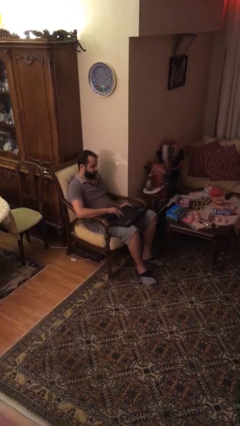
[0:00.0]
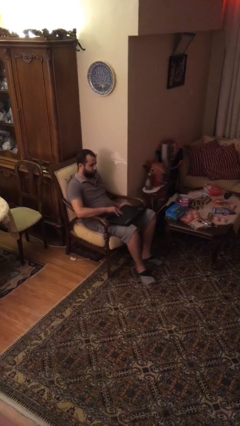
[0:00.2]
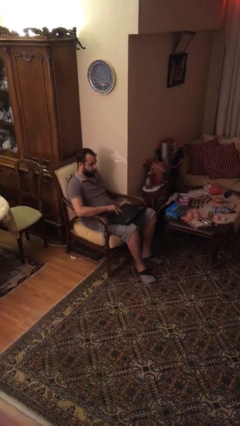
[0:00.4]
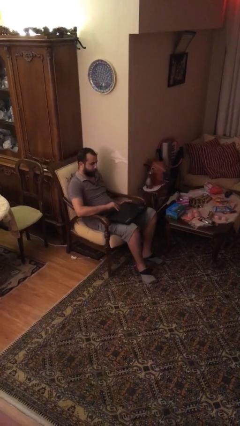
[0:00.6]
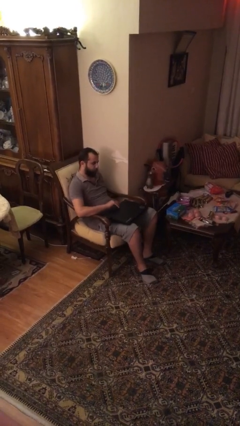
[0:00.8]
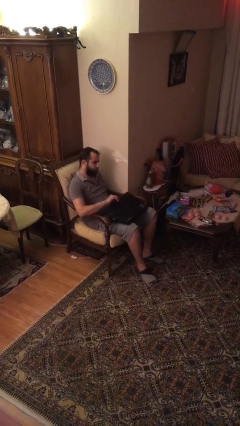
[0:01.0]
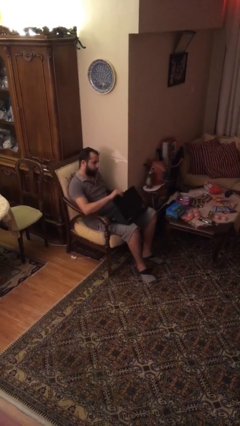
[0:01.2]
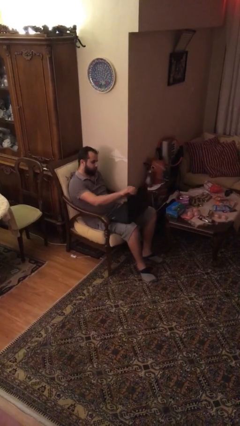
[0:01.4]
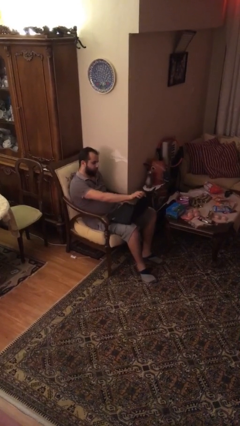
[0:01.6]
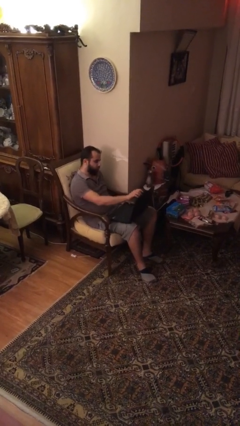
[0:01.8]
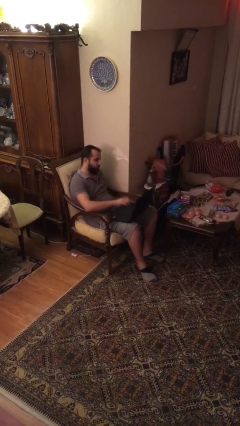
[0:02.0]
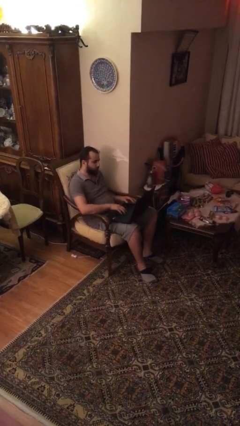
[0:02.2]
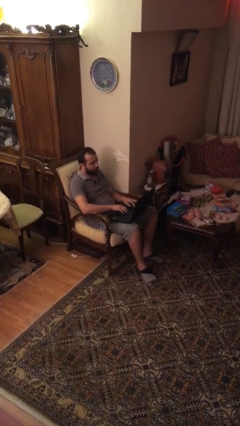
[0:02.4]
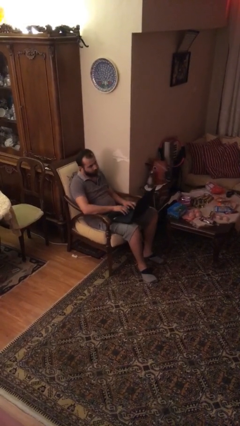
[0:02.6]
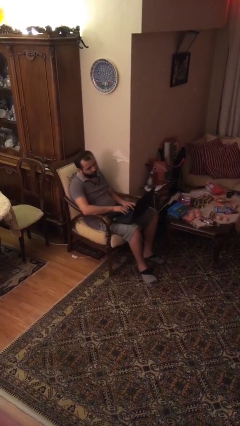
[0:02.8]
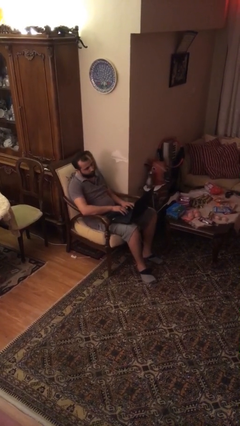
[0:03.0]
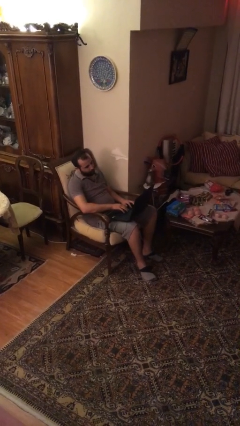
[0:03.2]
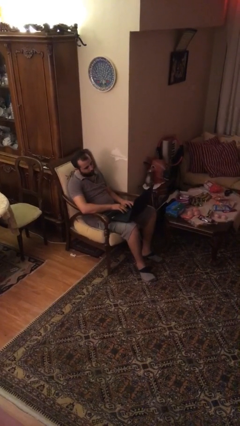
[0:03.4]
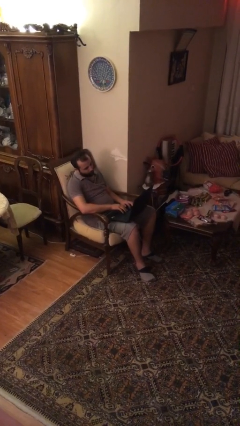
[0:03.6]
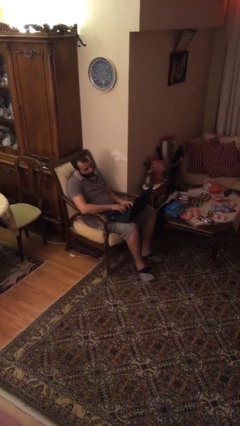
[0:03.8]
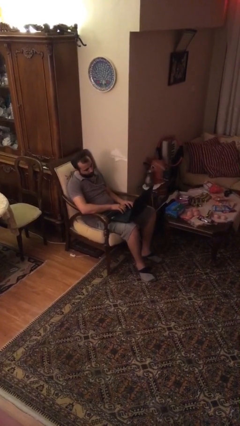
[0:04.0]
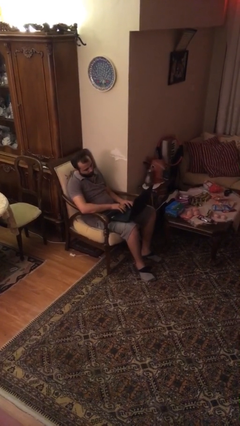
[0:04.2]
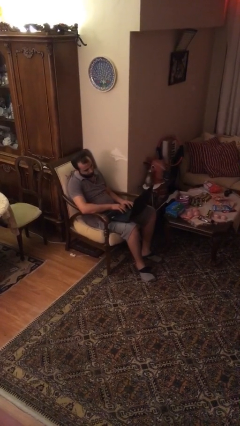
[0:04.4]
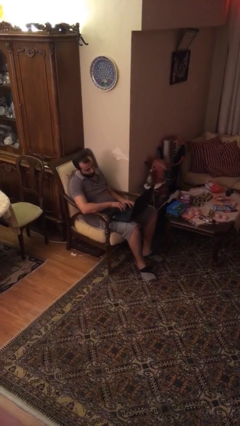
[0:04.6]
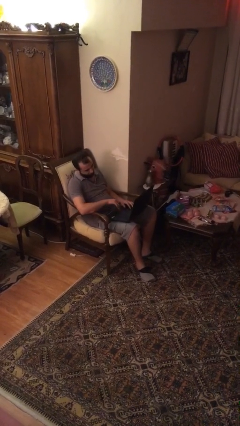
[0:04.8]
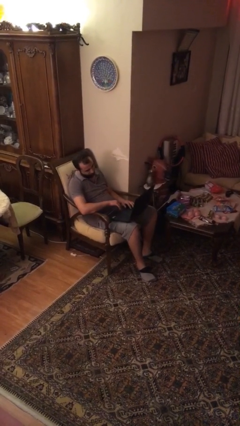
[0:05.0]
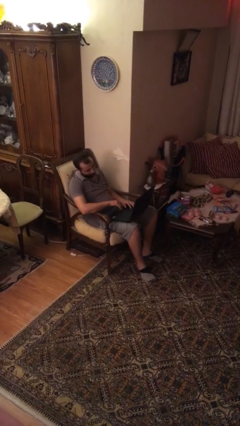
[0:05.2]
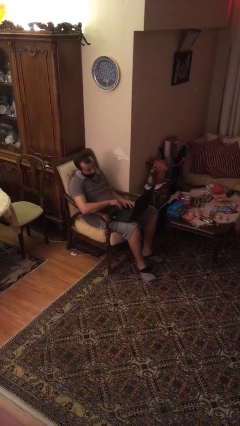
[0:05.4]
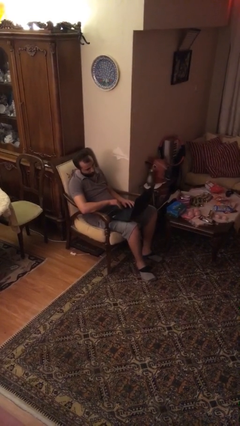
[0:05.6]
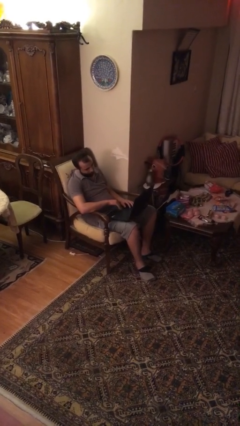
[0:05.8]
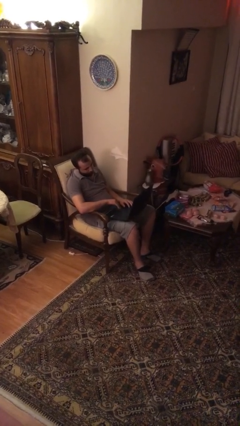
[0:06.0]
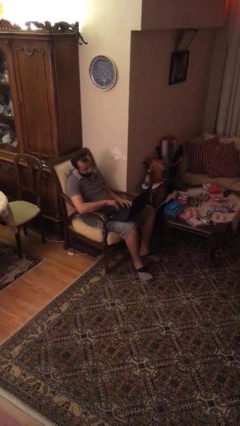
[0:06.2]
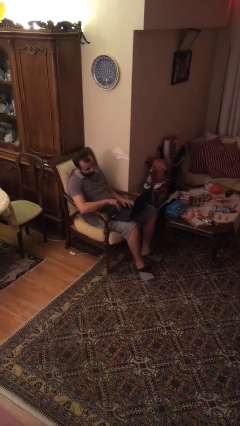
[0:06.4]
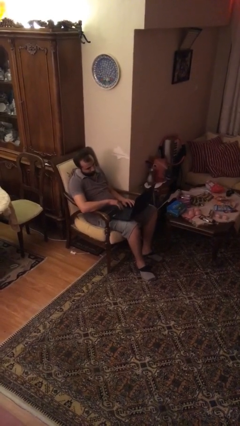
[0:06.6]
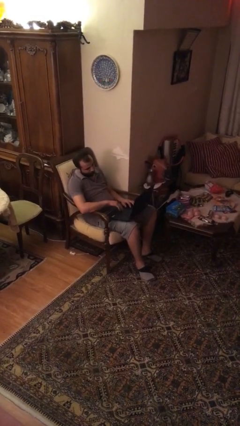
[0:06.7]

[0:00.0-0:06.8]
person interacts with laptop

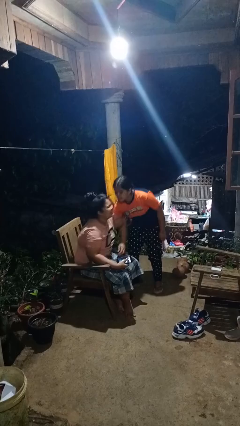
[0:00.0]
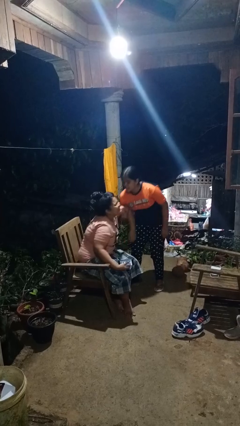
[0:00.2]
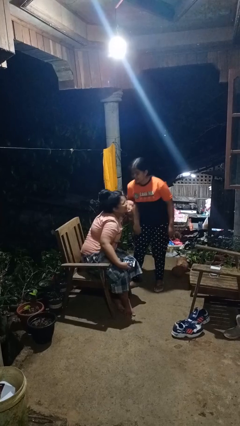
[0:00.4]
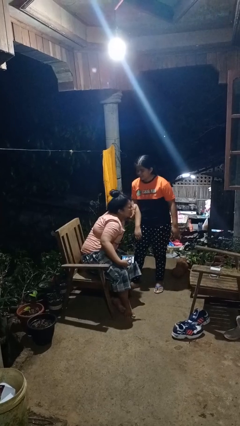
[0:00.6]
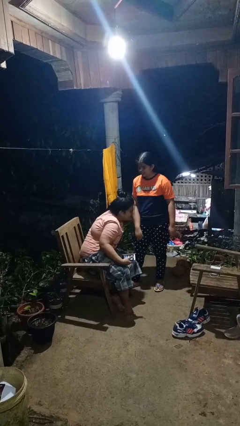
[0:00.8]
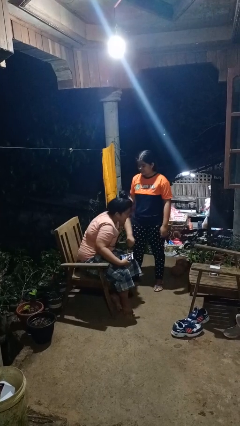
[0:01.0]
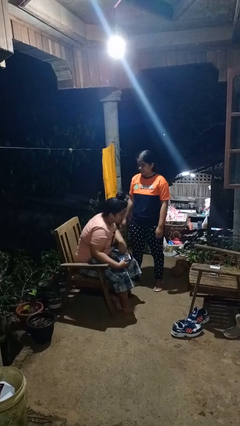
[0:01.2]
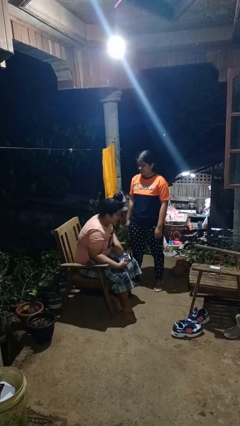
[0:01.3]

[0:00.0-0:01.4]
person grabs person by bicep

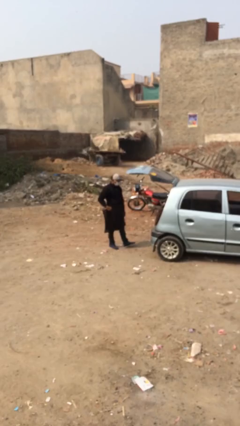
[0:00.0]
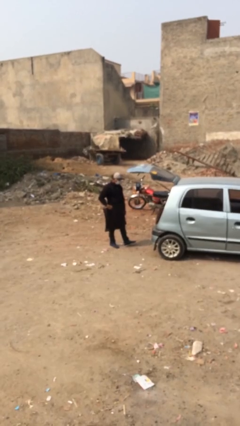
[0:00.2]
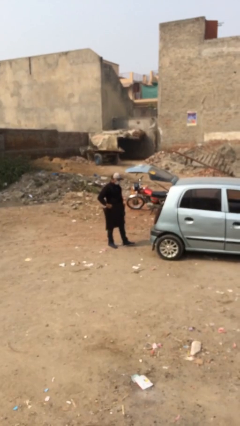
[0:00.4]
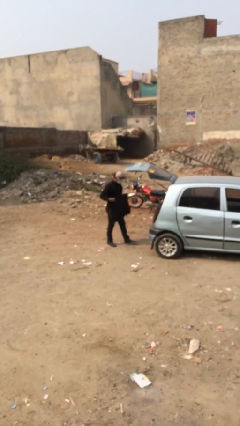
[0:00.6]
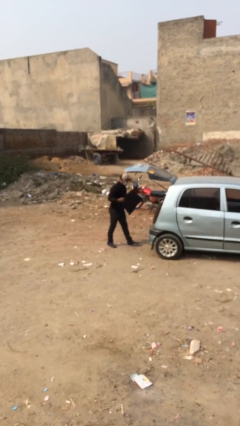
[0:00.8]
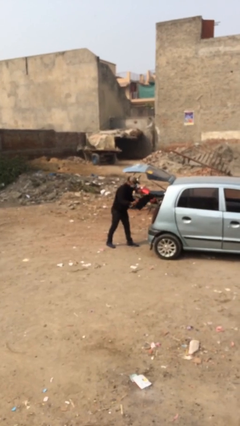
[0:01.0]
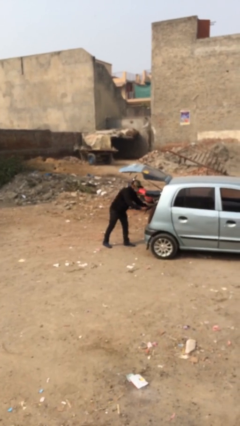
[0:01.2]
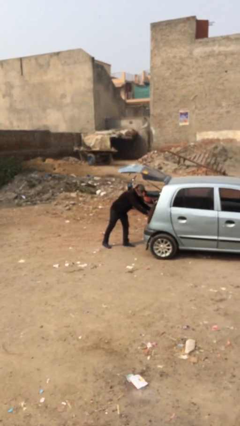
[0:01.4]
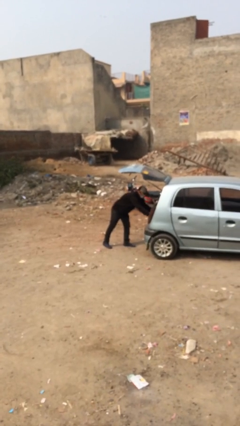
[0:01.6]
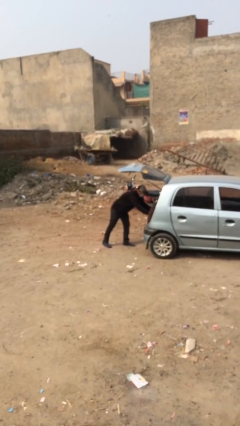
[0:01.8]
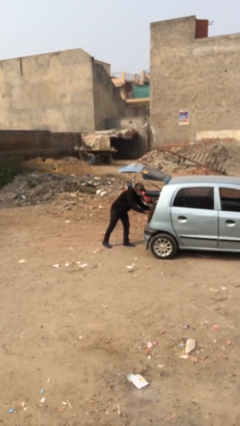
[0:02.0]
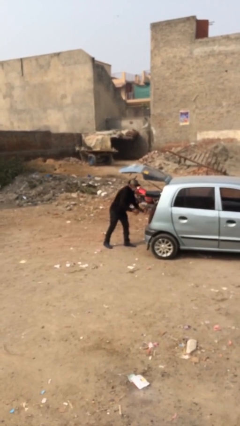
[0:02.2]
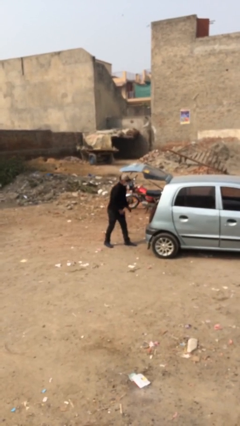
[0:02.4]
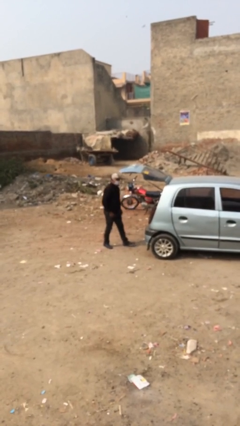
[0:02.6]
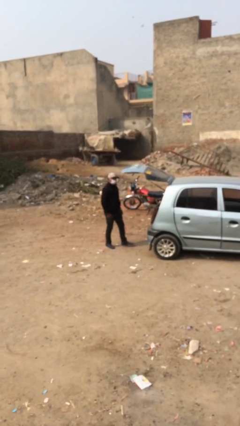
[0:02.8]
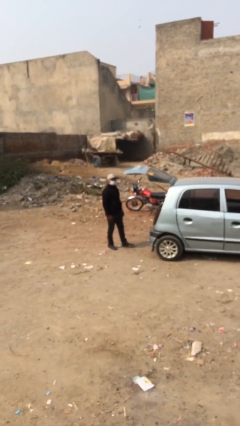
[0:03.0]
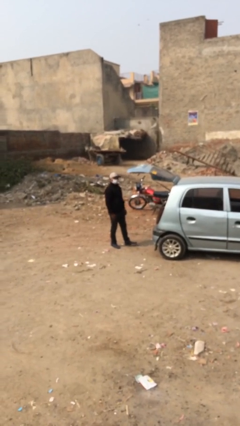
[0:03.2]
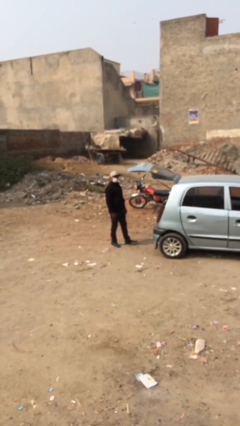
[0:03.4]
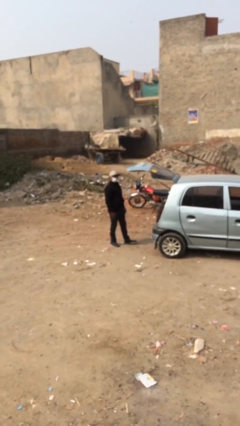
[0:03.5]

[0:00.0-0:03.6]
person loads car

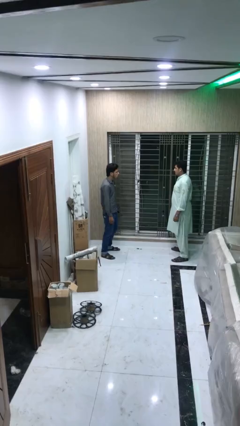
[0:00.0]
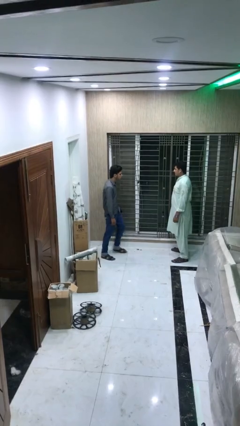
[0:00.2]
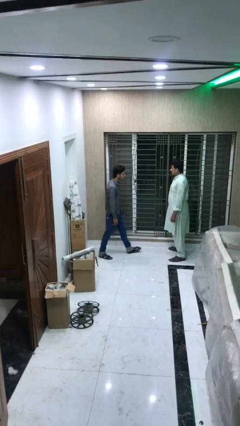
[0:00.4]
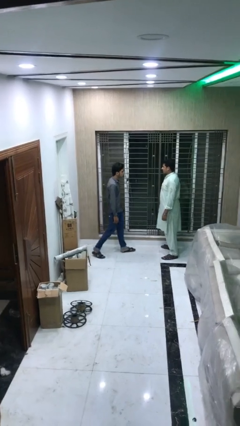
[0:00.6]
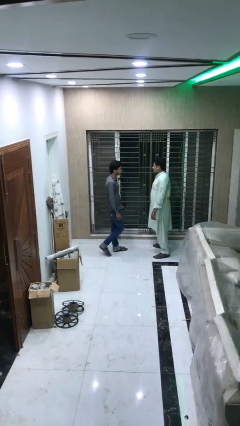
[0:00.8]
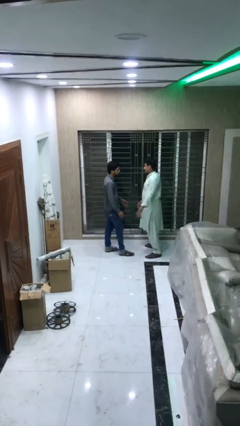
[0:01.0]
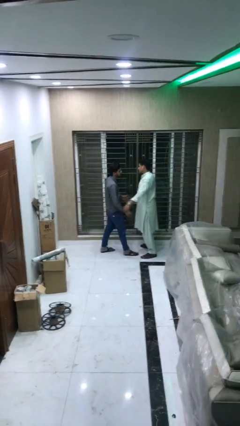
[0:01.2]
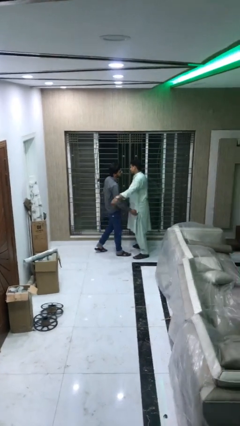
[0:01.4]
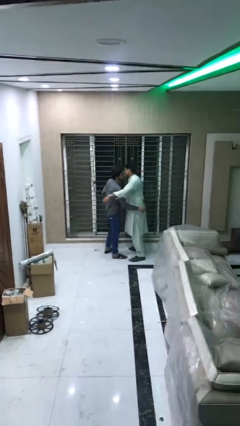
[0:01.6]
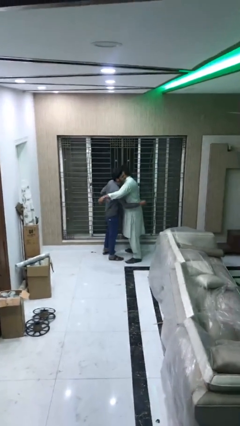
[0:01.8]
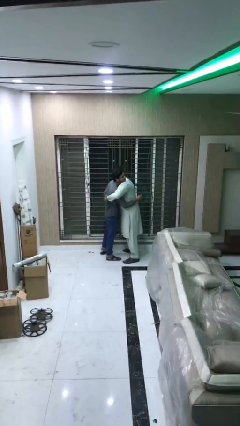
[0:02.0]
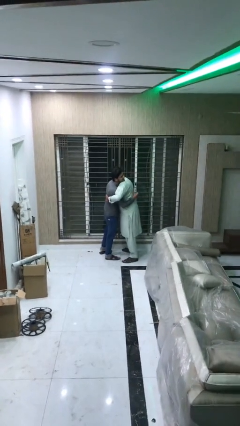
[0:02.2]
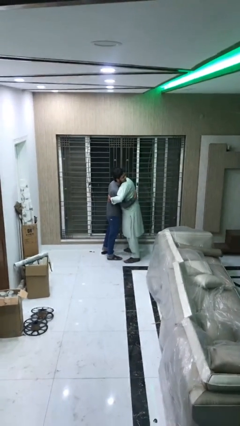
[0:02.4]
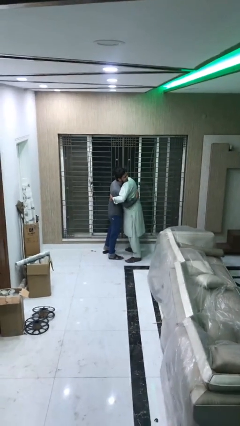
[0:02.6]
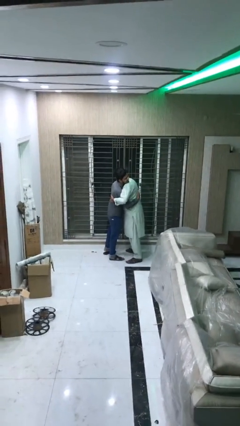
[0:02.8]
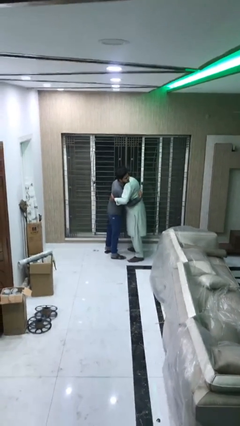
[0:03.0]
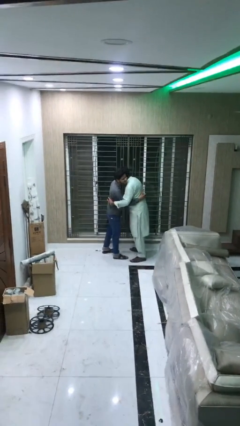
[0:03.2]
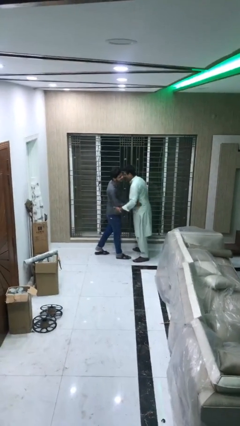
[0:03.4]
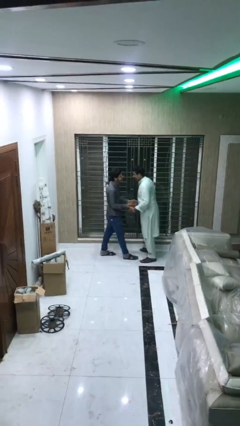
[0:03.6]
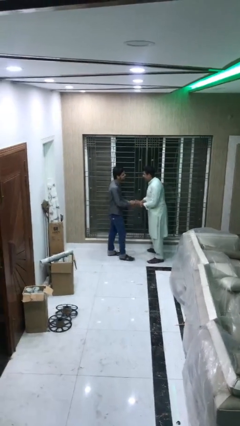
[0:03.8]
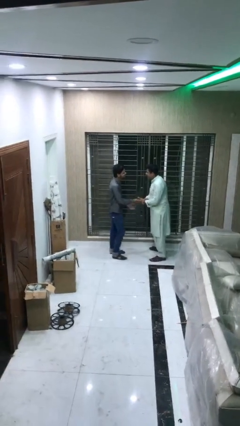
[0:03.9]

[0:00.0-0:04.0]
person embraces person

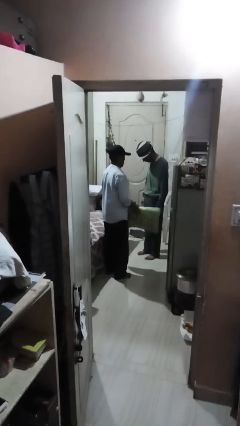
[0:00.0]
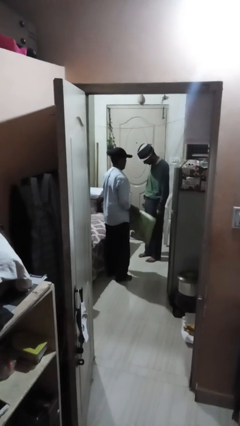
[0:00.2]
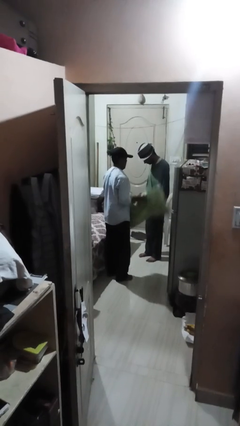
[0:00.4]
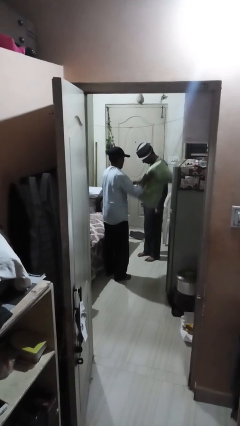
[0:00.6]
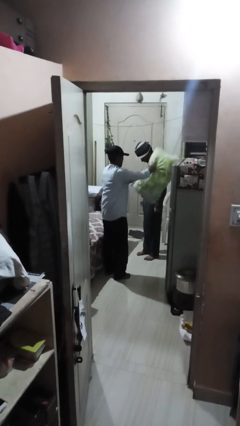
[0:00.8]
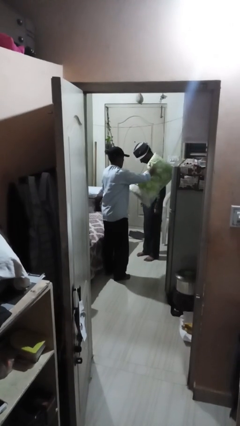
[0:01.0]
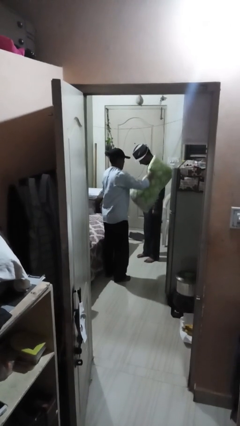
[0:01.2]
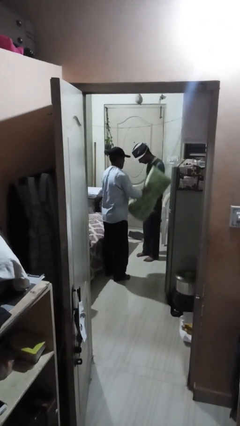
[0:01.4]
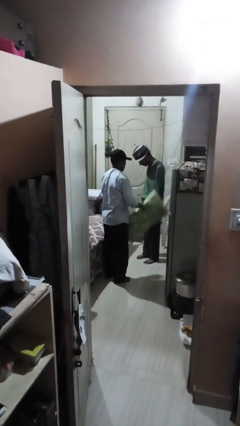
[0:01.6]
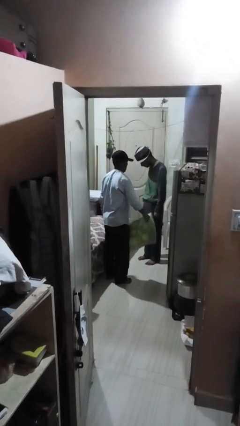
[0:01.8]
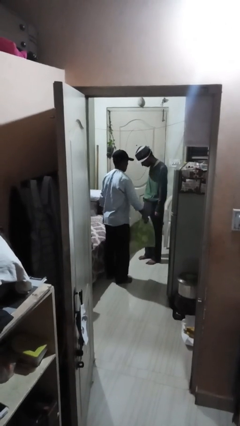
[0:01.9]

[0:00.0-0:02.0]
person hits person with pillow
